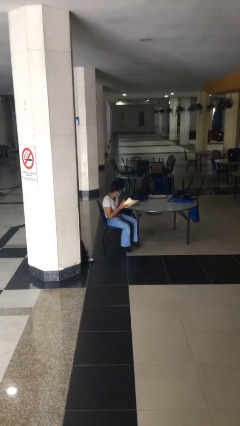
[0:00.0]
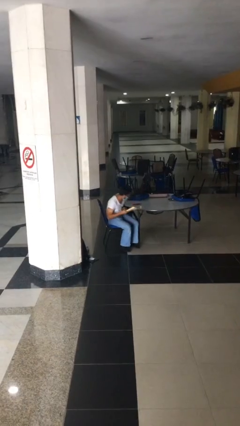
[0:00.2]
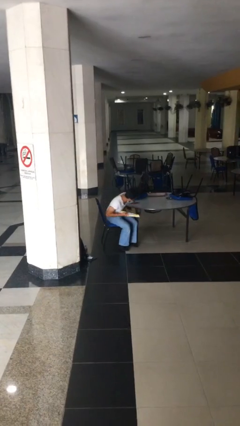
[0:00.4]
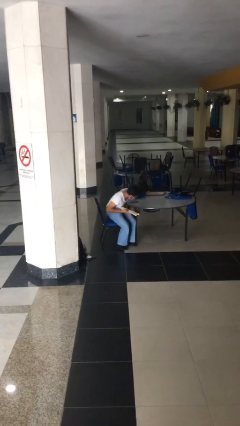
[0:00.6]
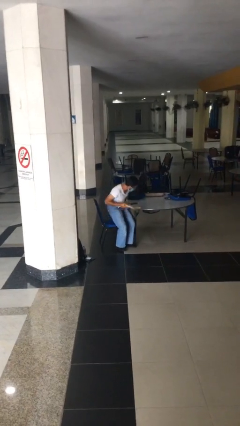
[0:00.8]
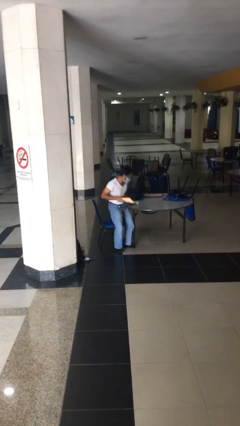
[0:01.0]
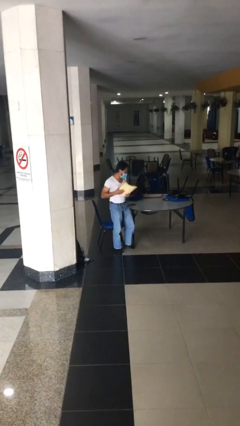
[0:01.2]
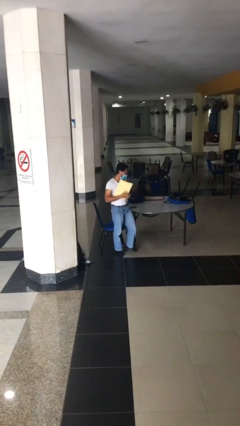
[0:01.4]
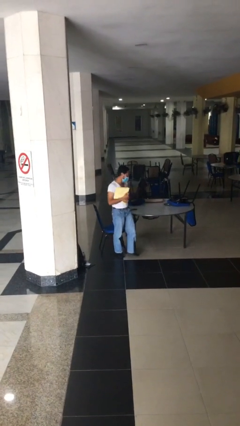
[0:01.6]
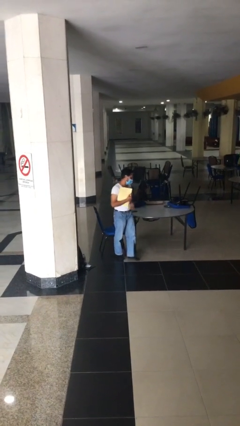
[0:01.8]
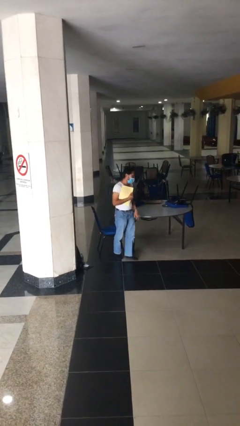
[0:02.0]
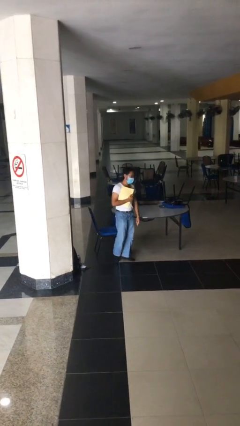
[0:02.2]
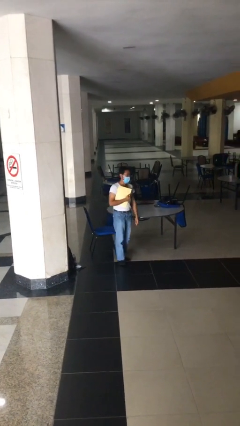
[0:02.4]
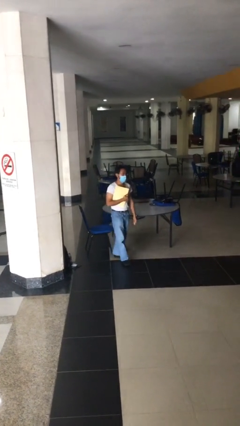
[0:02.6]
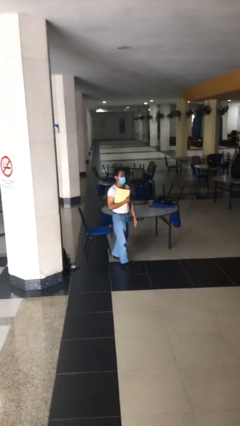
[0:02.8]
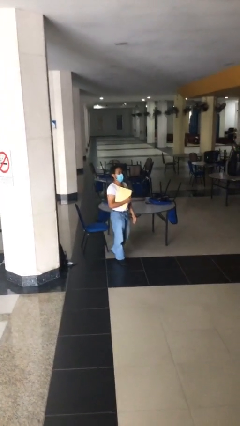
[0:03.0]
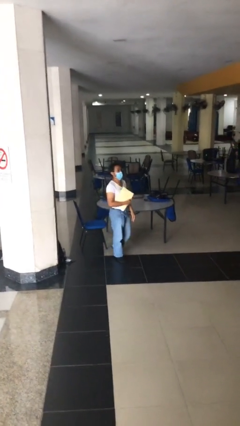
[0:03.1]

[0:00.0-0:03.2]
person stands up

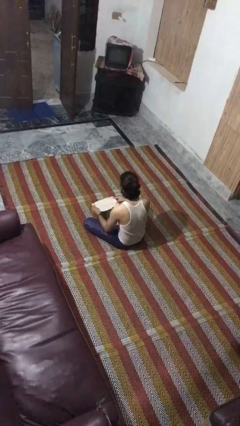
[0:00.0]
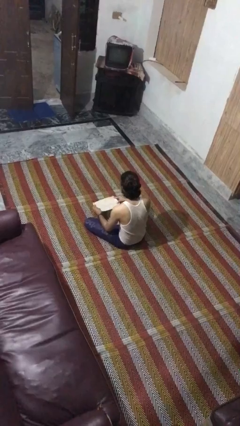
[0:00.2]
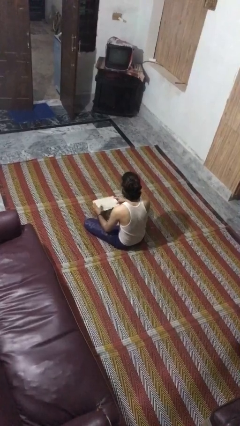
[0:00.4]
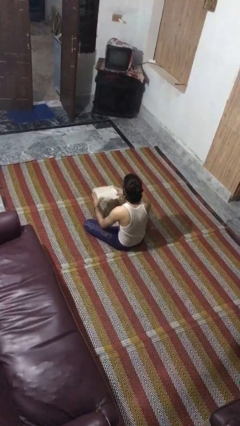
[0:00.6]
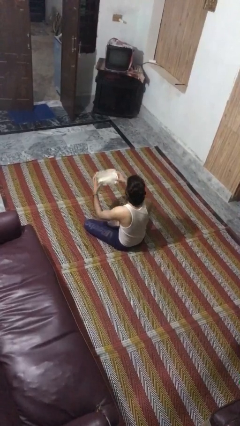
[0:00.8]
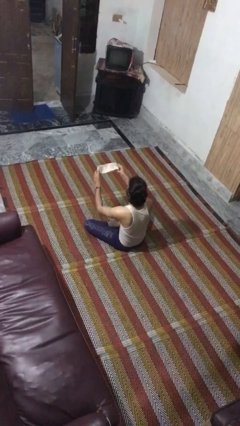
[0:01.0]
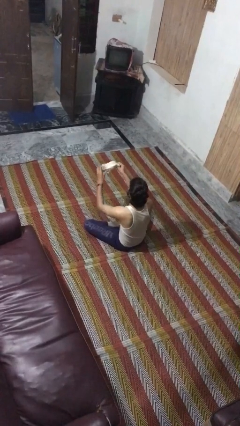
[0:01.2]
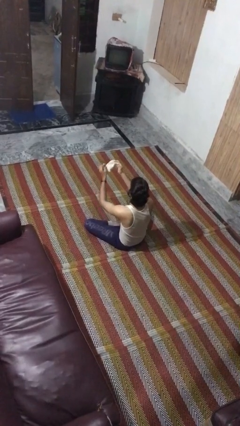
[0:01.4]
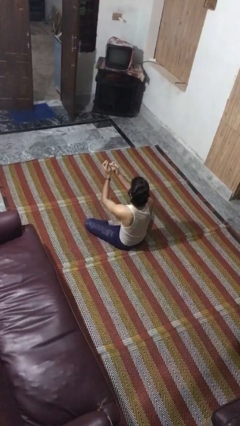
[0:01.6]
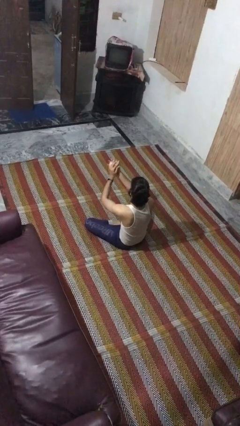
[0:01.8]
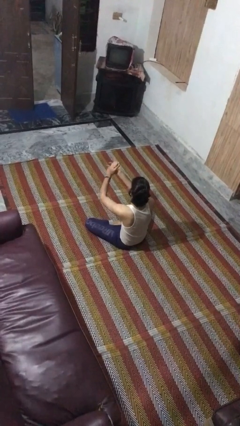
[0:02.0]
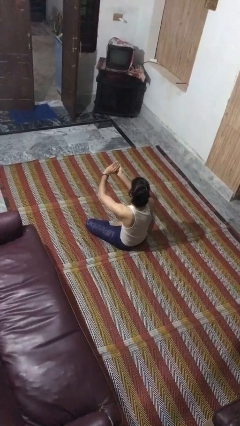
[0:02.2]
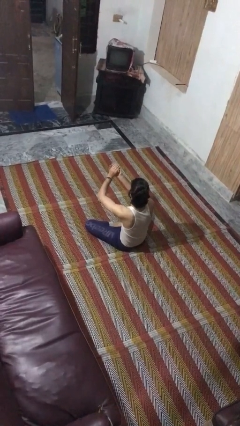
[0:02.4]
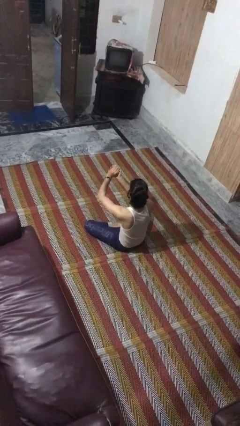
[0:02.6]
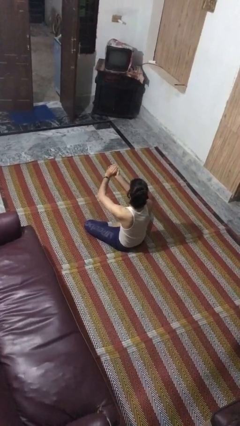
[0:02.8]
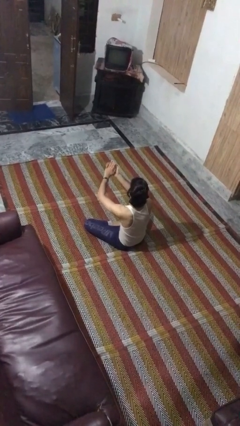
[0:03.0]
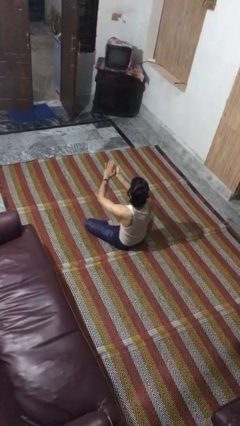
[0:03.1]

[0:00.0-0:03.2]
person crumples paper

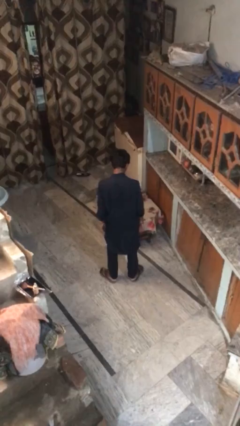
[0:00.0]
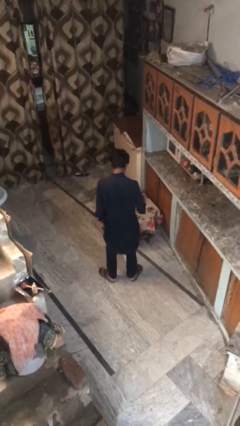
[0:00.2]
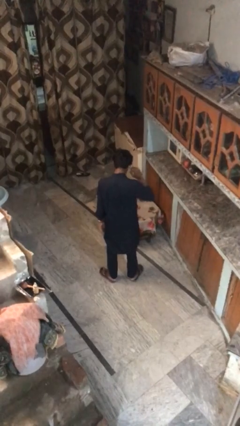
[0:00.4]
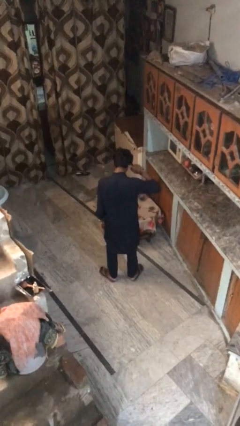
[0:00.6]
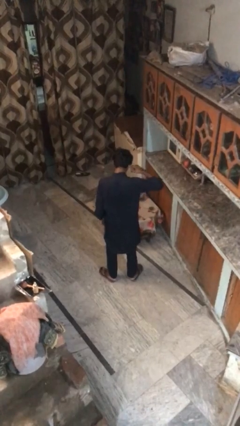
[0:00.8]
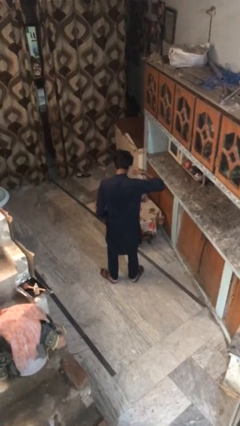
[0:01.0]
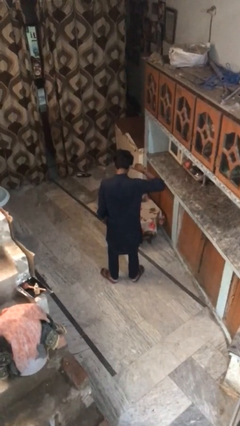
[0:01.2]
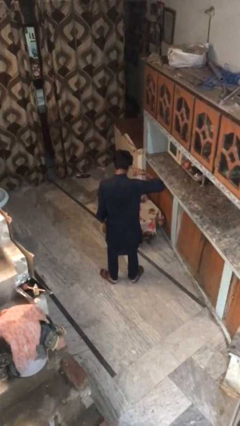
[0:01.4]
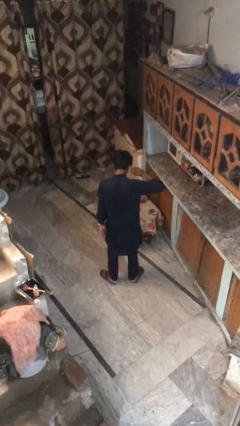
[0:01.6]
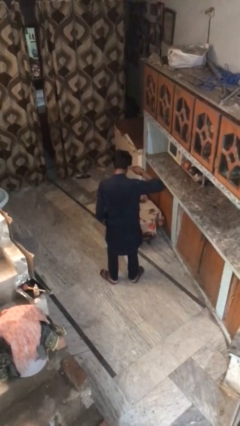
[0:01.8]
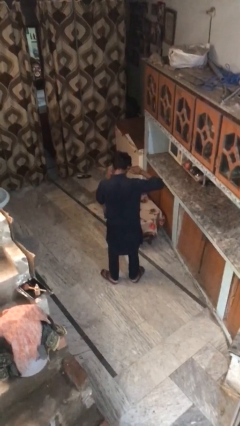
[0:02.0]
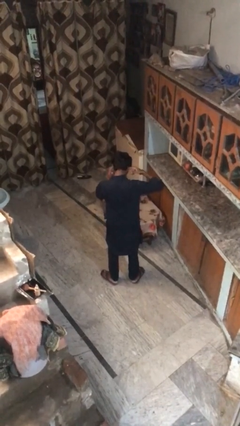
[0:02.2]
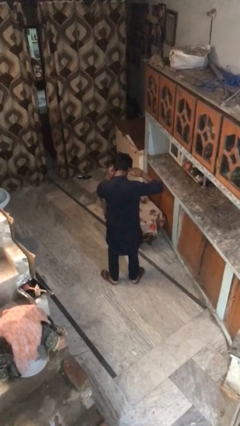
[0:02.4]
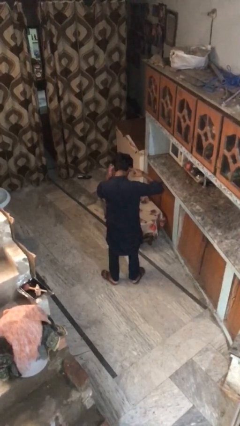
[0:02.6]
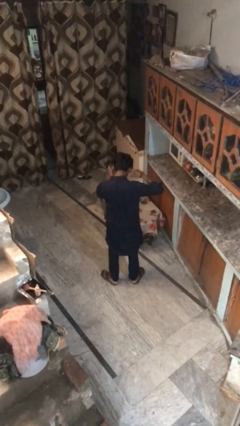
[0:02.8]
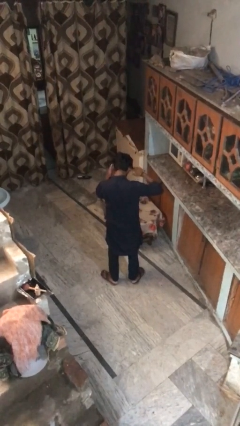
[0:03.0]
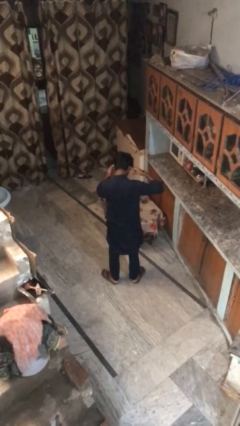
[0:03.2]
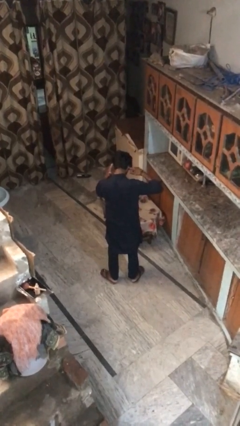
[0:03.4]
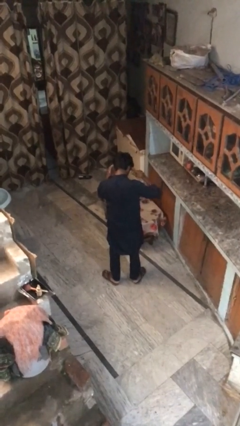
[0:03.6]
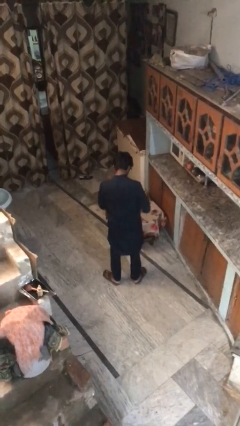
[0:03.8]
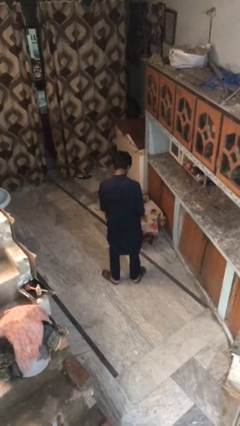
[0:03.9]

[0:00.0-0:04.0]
person puts fingers in ear

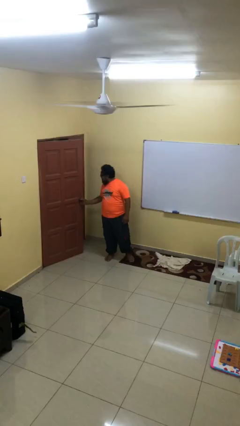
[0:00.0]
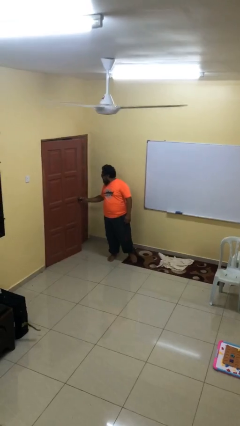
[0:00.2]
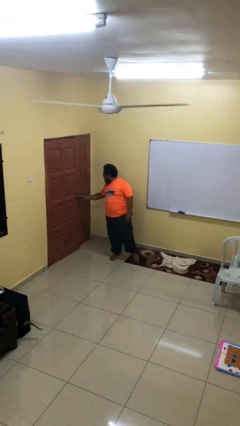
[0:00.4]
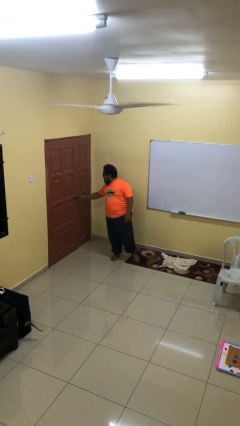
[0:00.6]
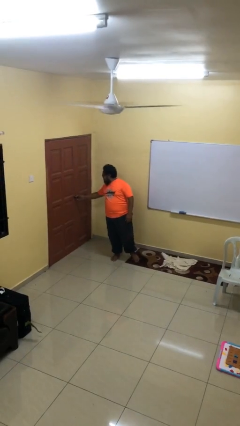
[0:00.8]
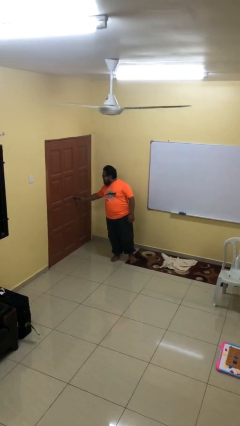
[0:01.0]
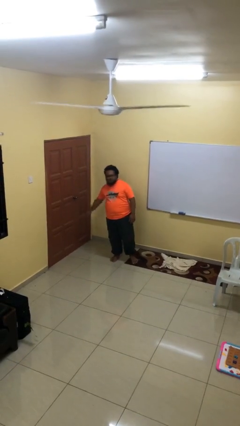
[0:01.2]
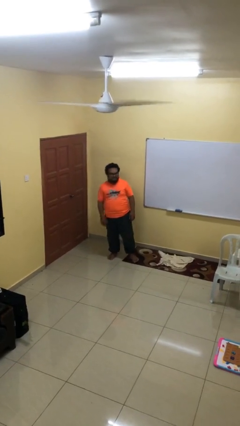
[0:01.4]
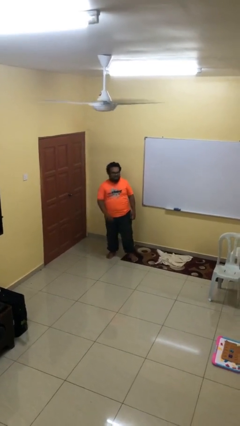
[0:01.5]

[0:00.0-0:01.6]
person closes facility door

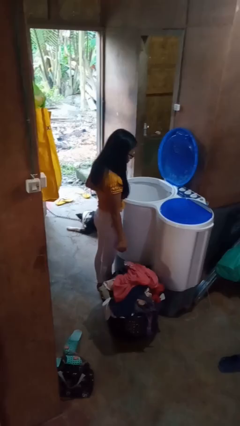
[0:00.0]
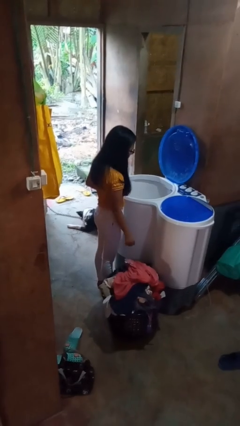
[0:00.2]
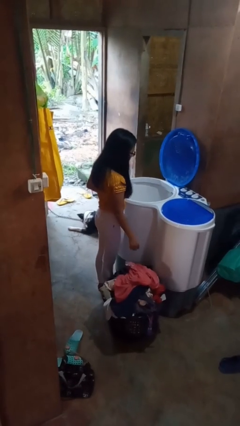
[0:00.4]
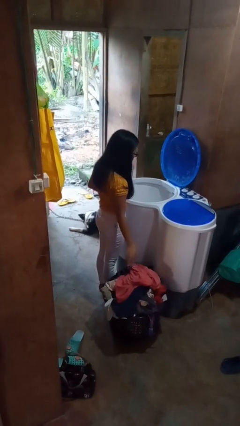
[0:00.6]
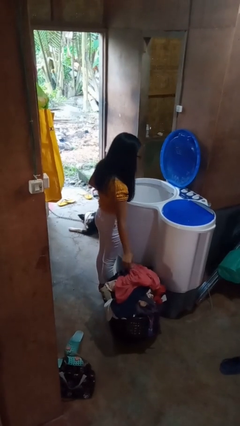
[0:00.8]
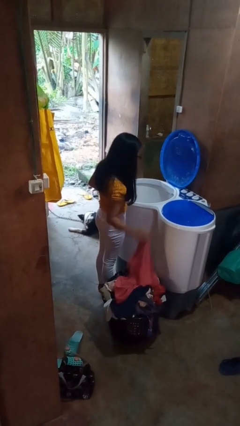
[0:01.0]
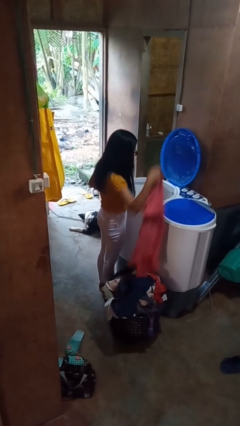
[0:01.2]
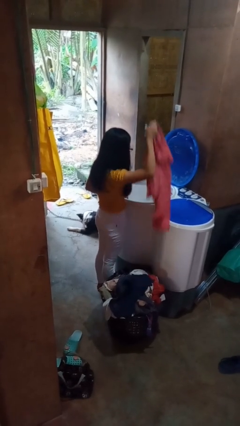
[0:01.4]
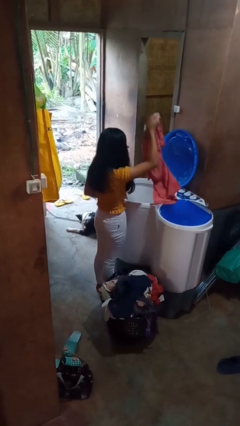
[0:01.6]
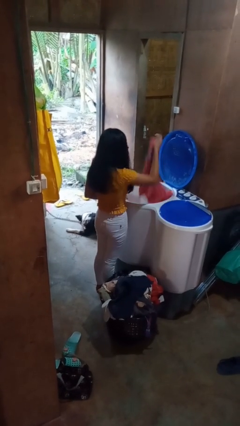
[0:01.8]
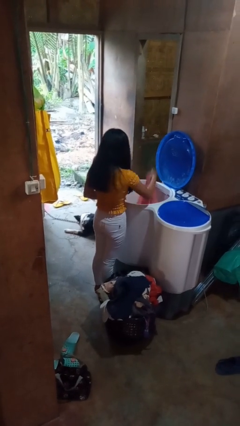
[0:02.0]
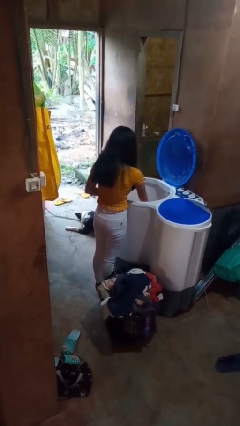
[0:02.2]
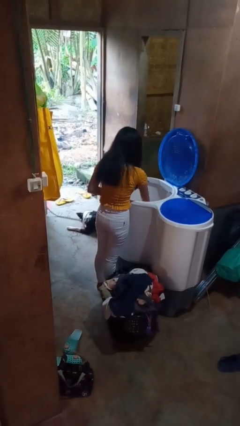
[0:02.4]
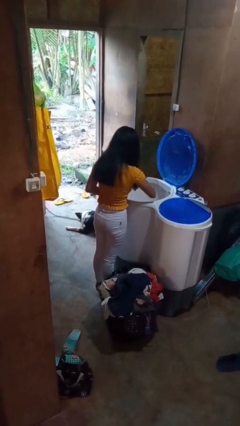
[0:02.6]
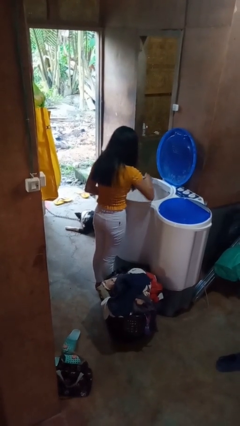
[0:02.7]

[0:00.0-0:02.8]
person loads clotheswasher

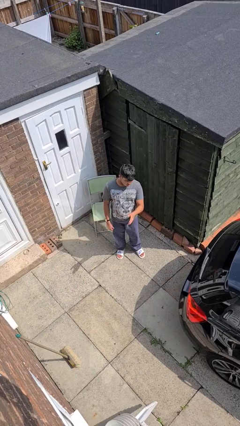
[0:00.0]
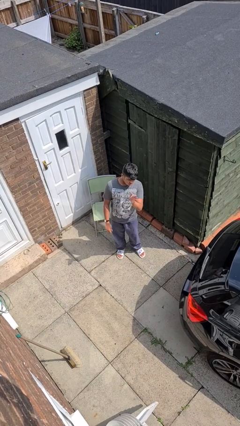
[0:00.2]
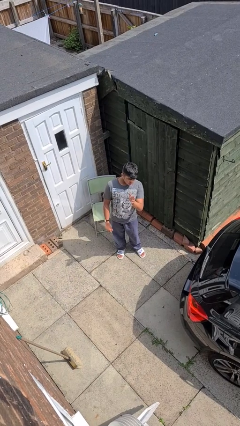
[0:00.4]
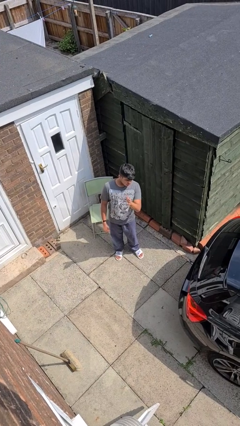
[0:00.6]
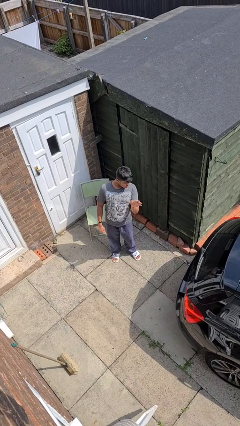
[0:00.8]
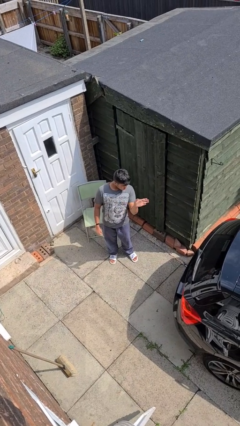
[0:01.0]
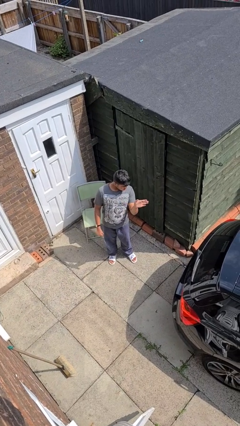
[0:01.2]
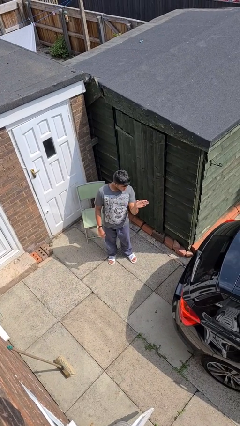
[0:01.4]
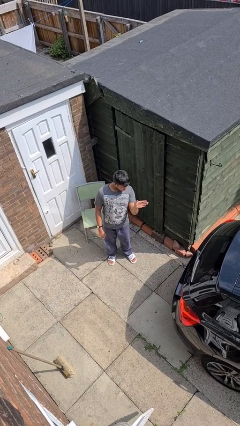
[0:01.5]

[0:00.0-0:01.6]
person gestures swipe left

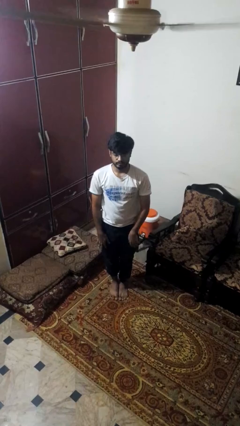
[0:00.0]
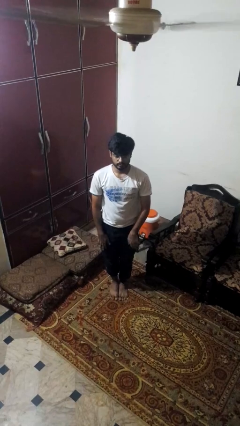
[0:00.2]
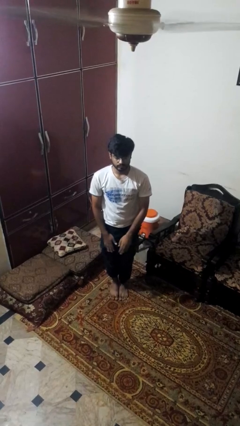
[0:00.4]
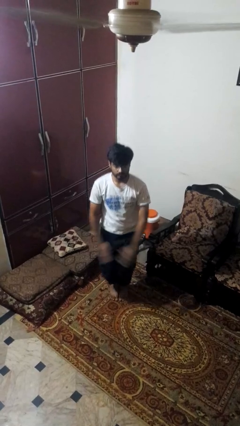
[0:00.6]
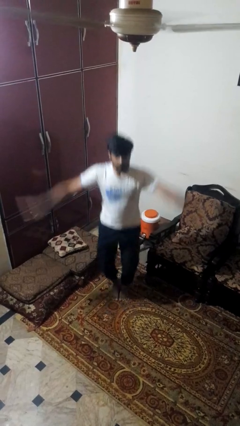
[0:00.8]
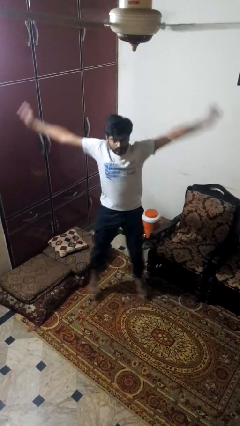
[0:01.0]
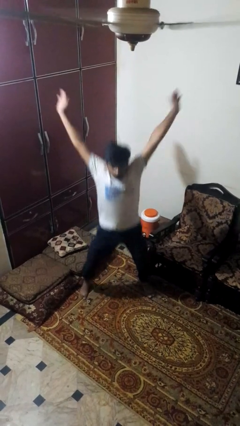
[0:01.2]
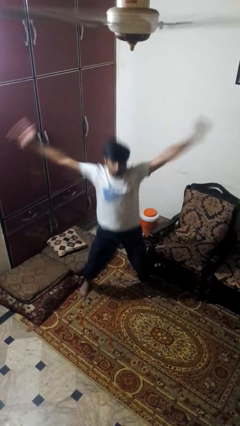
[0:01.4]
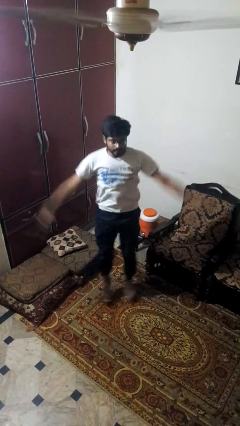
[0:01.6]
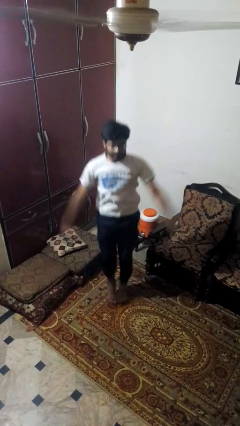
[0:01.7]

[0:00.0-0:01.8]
person exercises with jumping jacks
